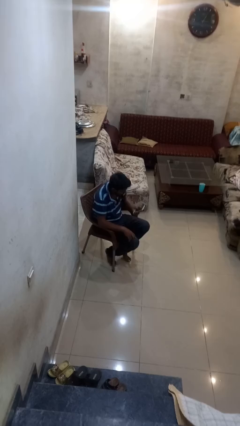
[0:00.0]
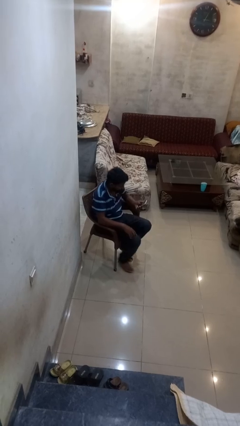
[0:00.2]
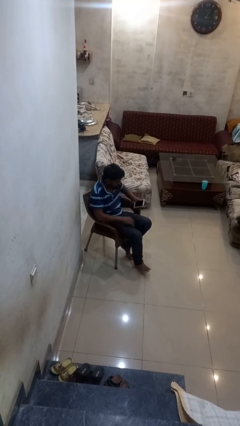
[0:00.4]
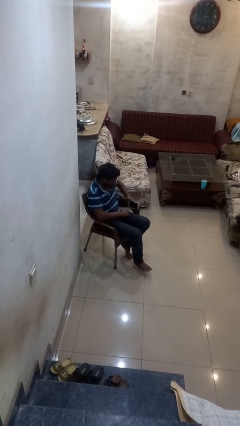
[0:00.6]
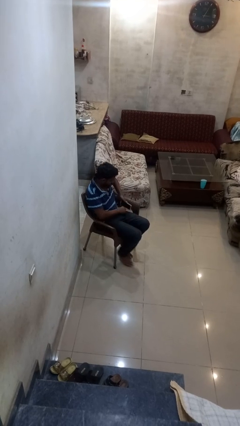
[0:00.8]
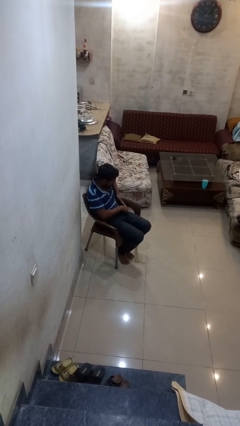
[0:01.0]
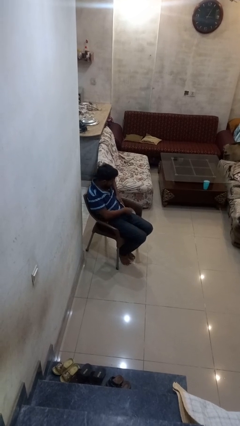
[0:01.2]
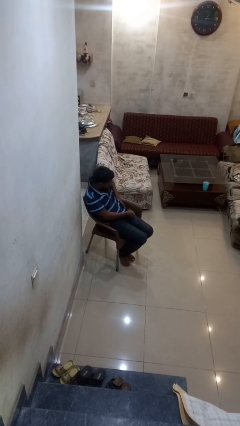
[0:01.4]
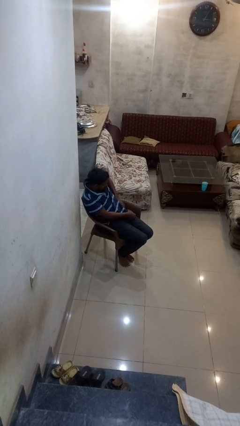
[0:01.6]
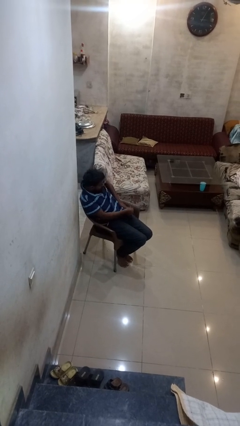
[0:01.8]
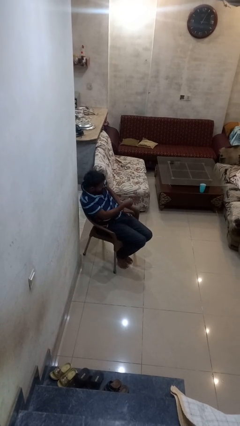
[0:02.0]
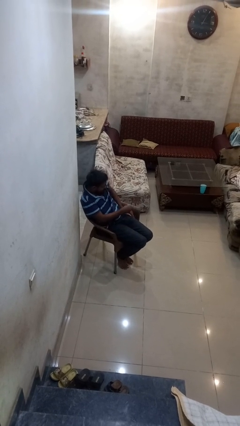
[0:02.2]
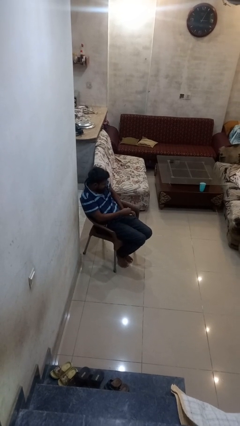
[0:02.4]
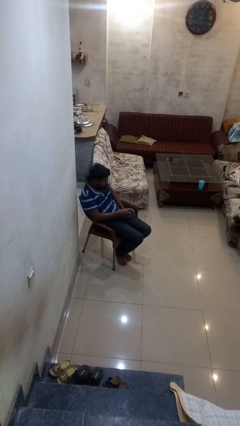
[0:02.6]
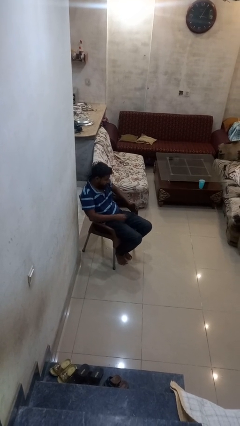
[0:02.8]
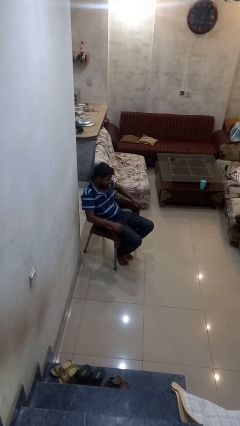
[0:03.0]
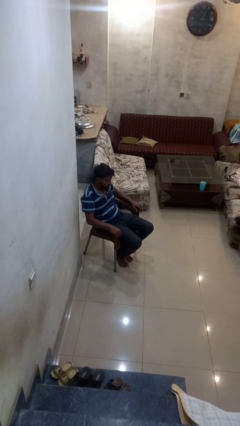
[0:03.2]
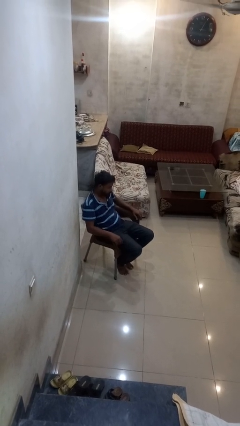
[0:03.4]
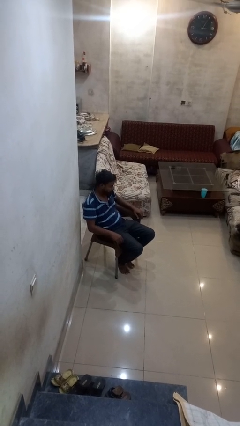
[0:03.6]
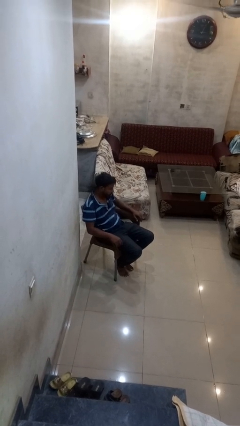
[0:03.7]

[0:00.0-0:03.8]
person puts phone into pocket

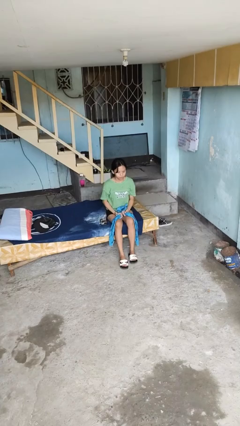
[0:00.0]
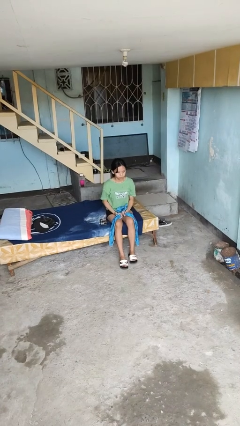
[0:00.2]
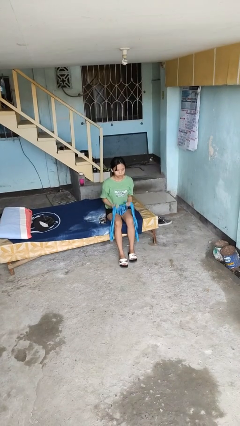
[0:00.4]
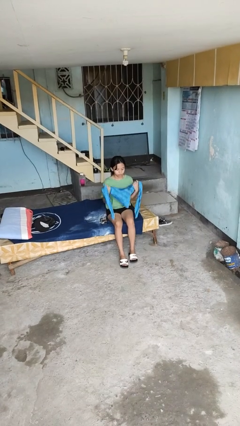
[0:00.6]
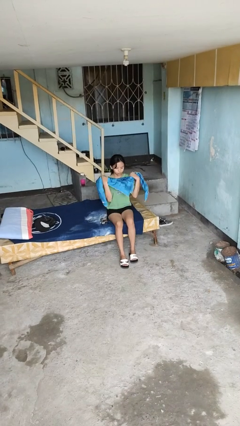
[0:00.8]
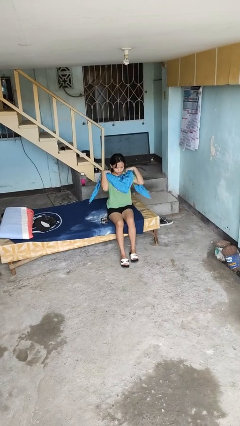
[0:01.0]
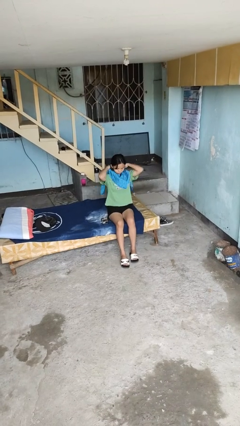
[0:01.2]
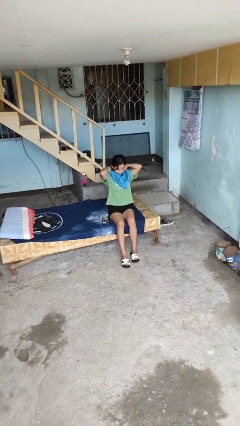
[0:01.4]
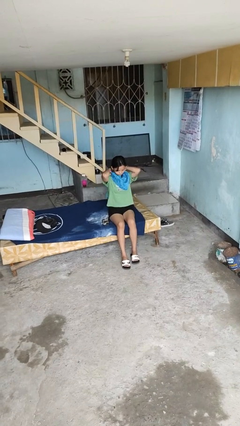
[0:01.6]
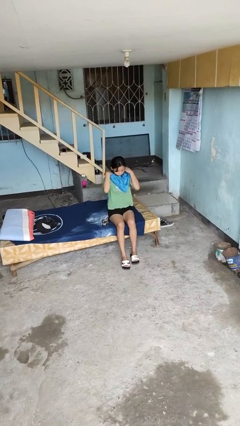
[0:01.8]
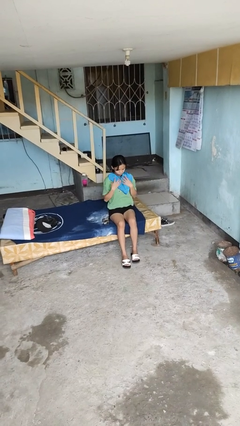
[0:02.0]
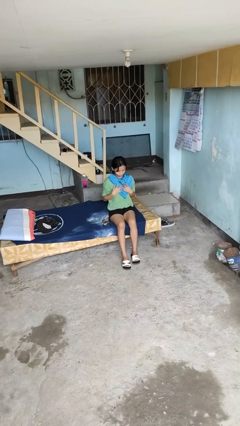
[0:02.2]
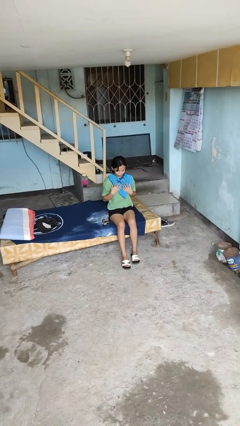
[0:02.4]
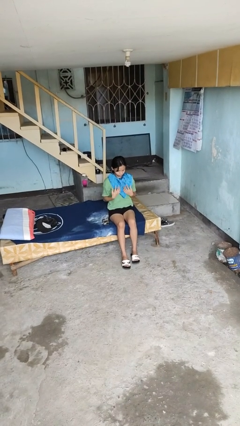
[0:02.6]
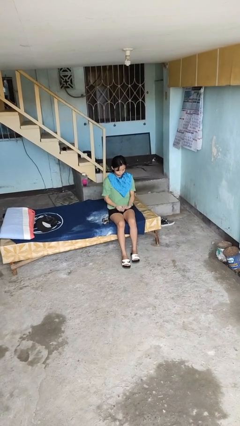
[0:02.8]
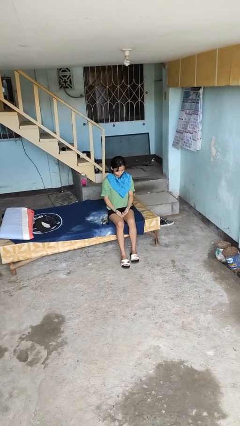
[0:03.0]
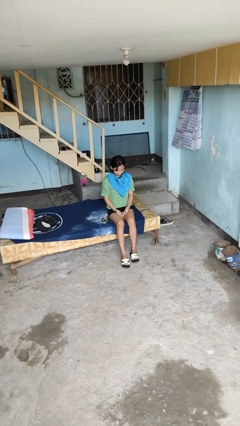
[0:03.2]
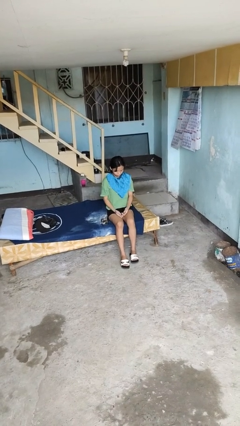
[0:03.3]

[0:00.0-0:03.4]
person puts on scarf

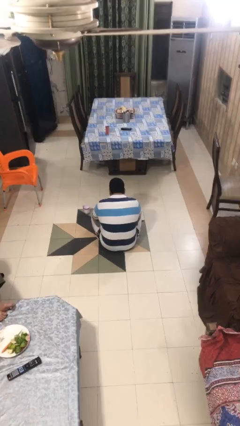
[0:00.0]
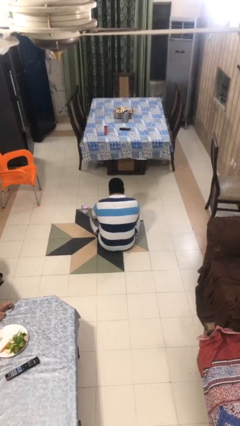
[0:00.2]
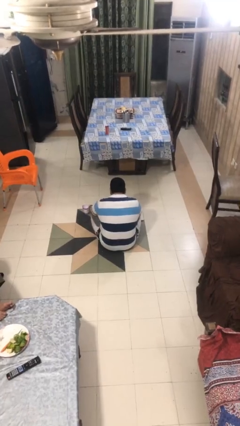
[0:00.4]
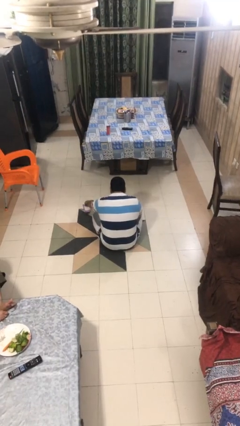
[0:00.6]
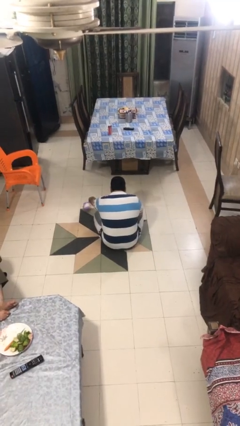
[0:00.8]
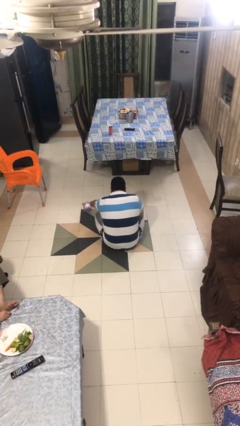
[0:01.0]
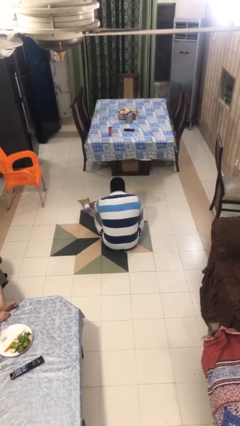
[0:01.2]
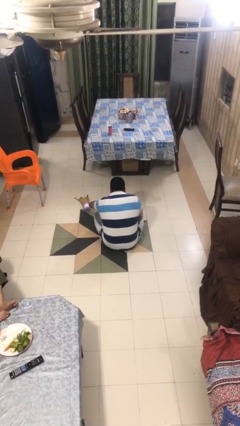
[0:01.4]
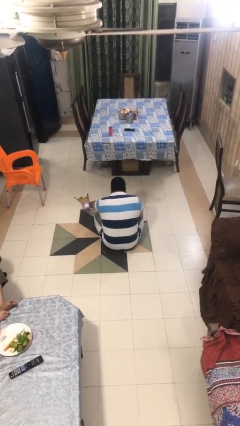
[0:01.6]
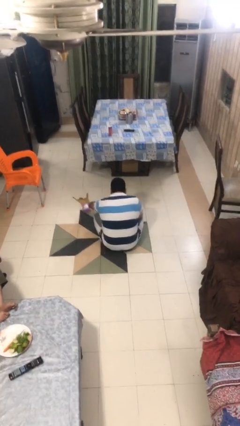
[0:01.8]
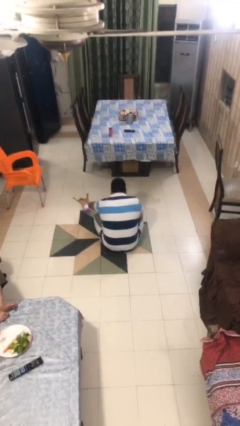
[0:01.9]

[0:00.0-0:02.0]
person spills on floor

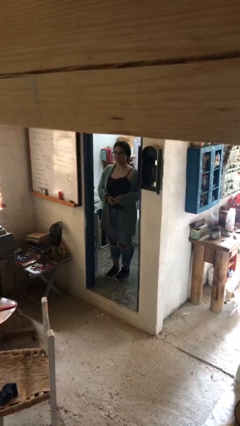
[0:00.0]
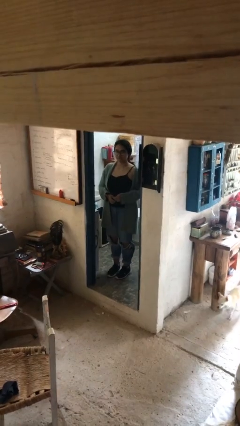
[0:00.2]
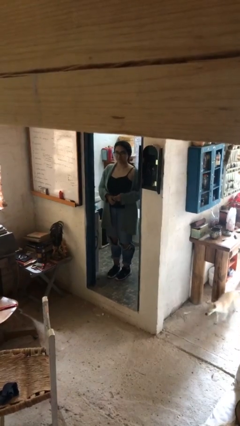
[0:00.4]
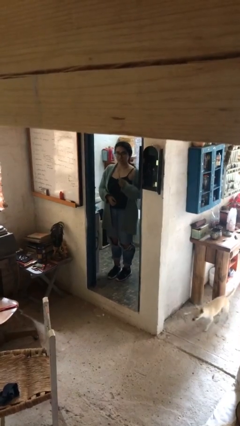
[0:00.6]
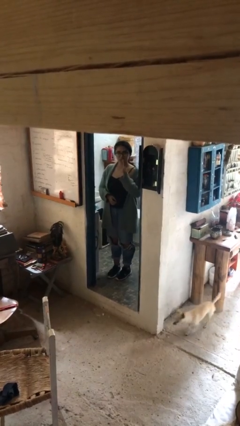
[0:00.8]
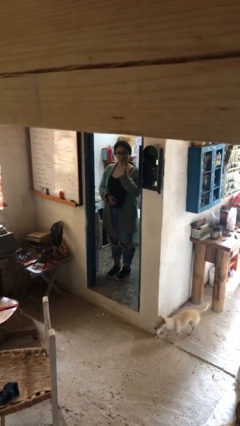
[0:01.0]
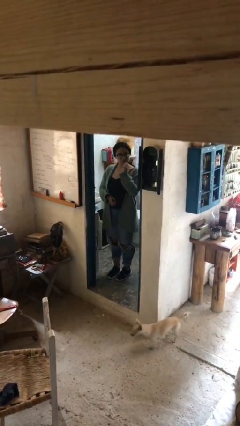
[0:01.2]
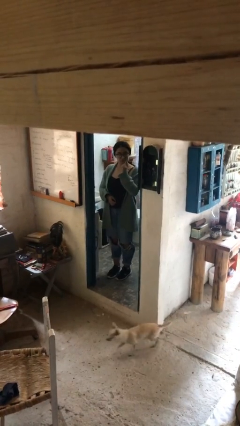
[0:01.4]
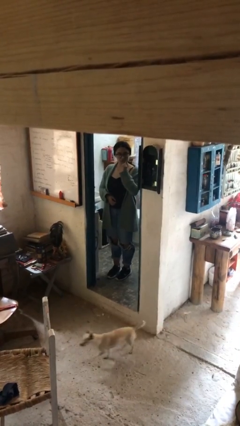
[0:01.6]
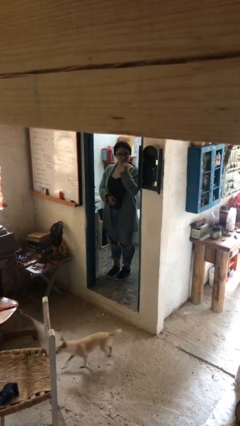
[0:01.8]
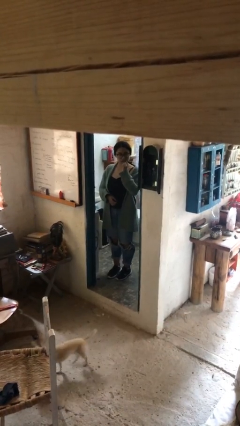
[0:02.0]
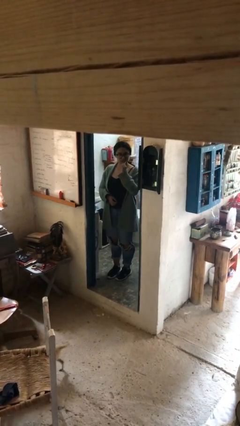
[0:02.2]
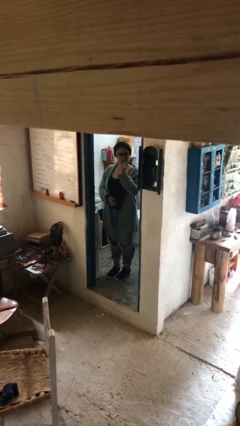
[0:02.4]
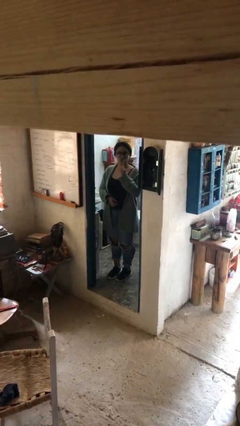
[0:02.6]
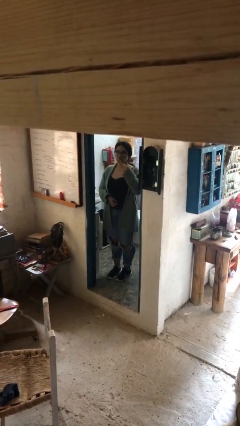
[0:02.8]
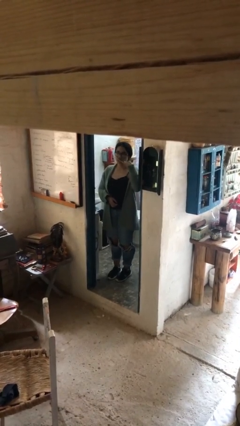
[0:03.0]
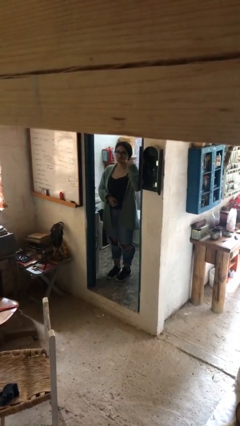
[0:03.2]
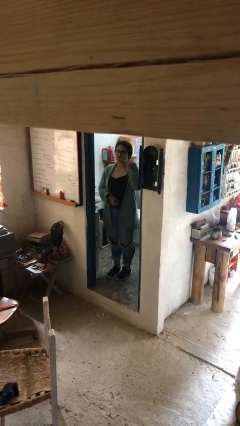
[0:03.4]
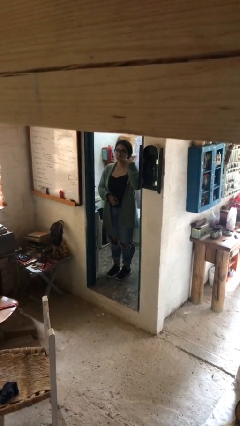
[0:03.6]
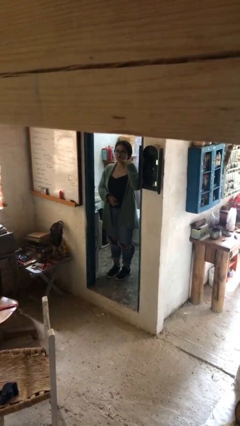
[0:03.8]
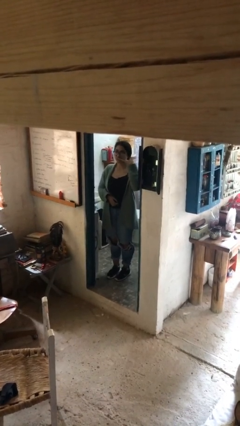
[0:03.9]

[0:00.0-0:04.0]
person brushes teeth

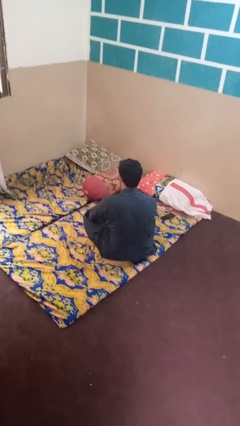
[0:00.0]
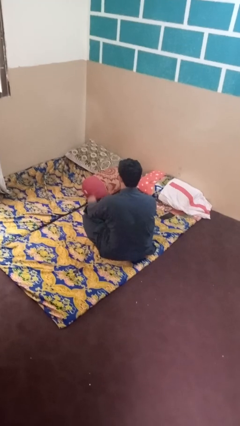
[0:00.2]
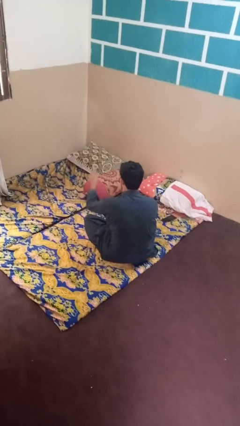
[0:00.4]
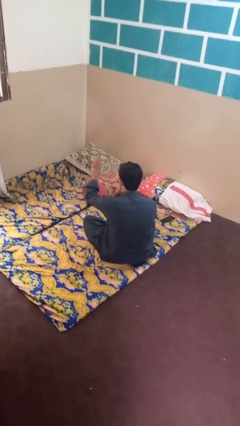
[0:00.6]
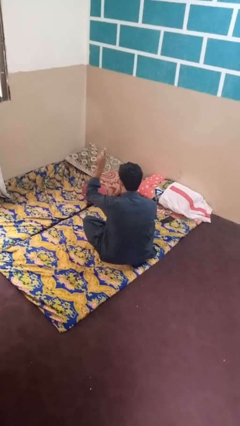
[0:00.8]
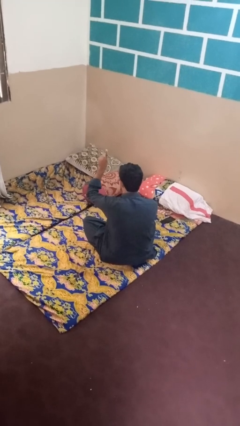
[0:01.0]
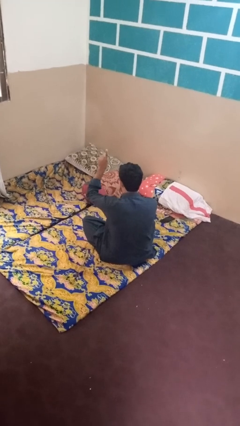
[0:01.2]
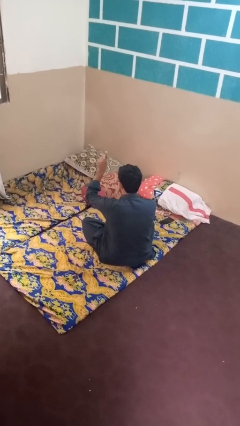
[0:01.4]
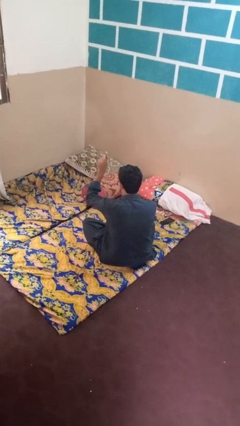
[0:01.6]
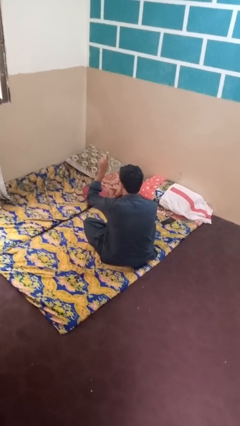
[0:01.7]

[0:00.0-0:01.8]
person gestures hang loose

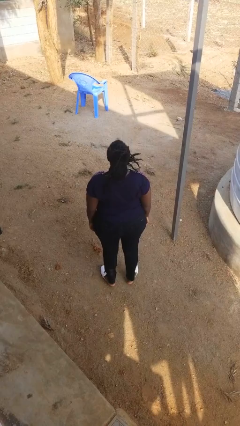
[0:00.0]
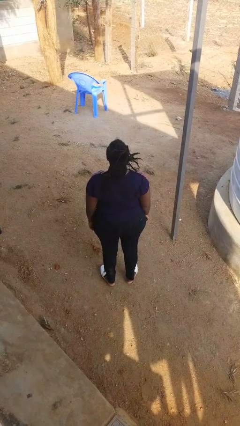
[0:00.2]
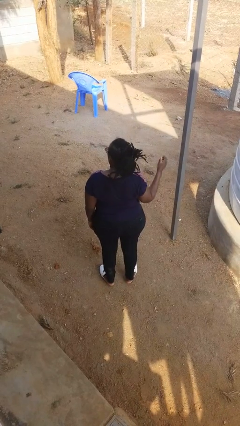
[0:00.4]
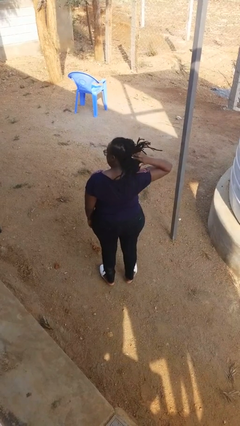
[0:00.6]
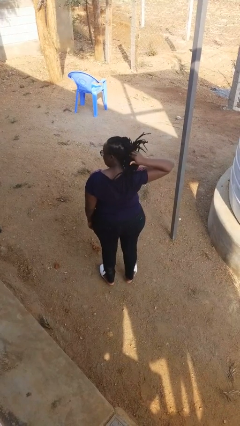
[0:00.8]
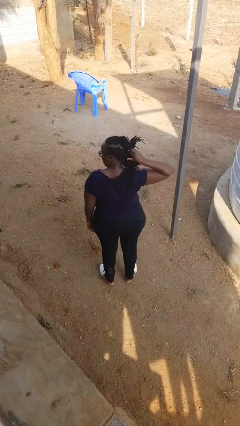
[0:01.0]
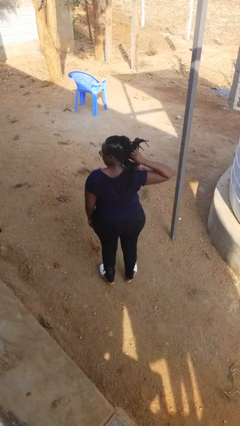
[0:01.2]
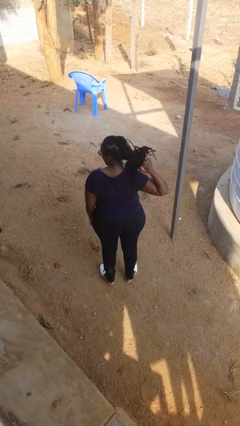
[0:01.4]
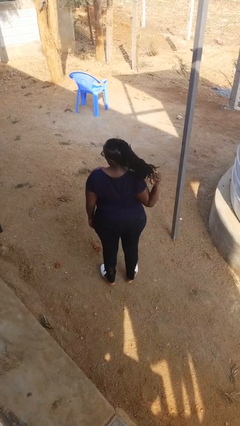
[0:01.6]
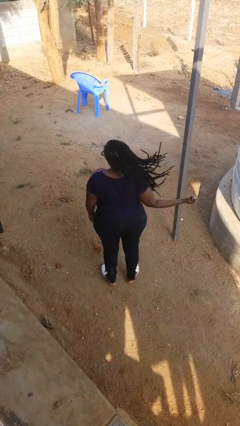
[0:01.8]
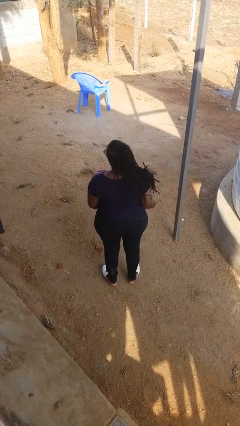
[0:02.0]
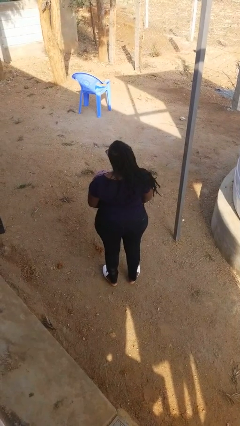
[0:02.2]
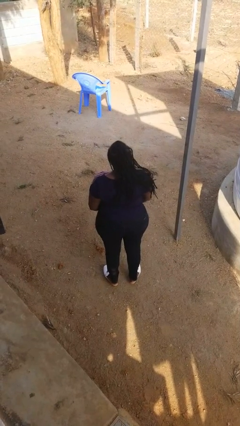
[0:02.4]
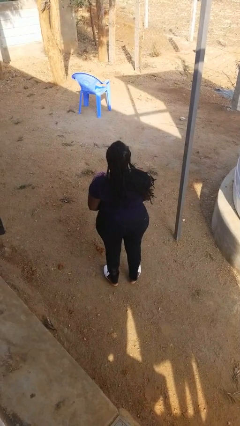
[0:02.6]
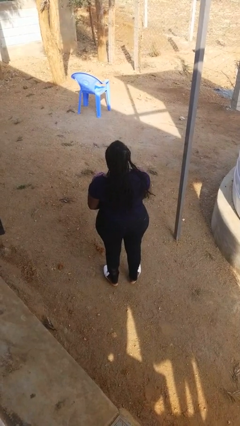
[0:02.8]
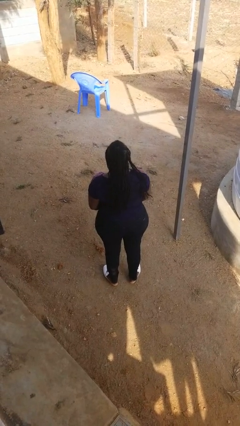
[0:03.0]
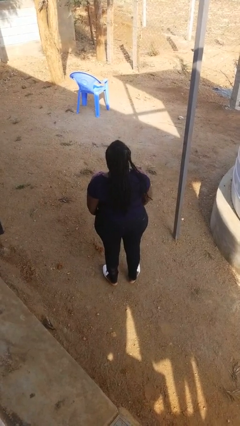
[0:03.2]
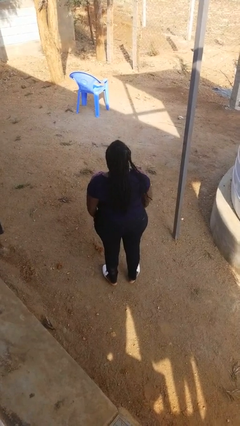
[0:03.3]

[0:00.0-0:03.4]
person takes off hairtie
